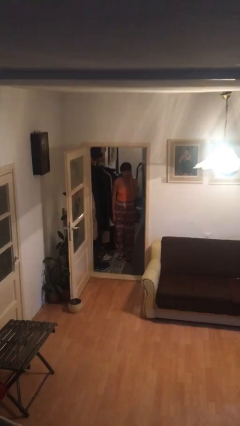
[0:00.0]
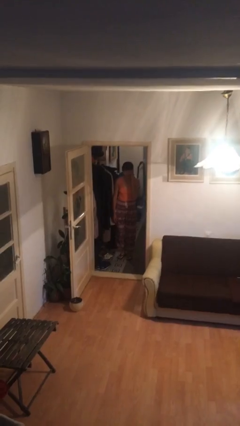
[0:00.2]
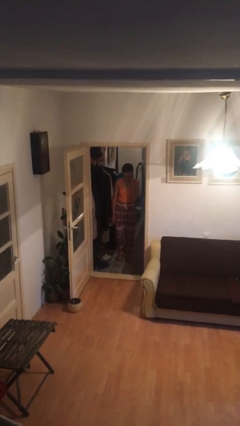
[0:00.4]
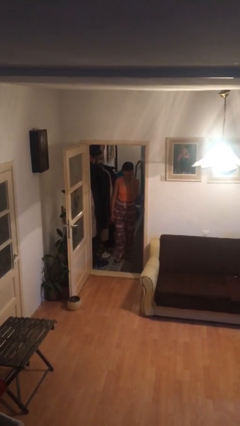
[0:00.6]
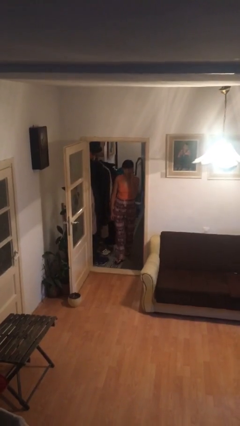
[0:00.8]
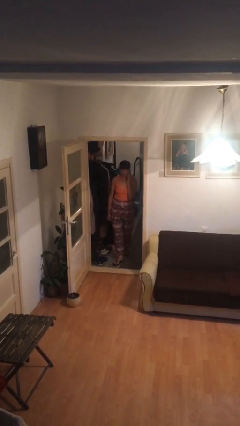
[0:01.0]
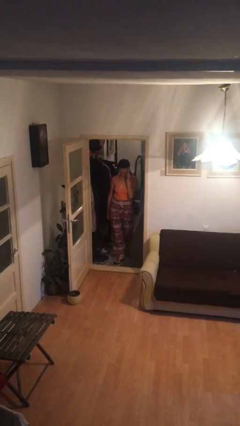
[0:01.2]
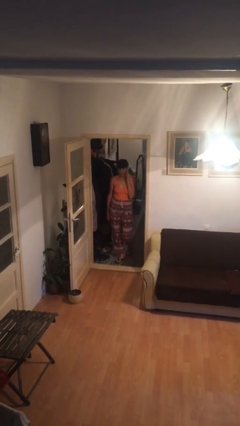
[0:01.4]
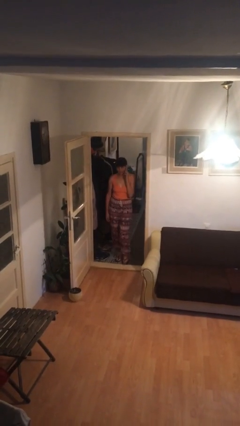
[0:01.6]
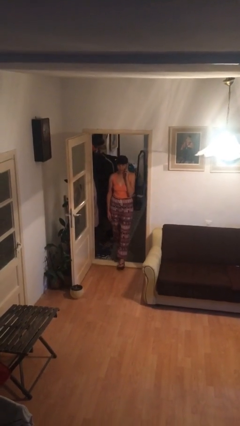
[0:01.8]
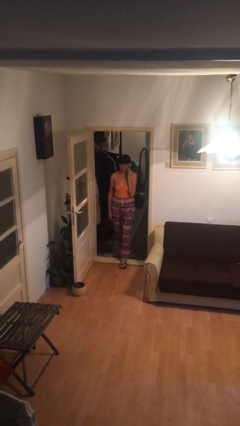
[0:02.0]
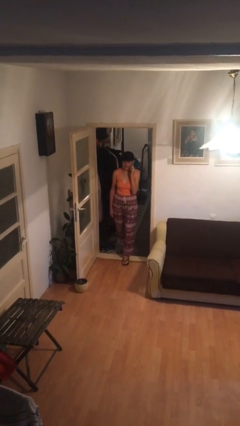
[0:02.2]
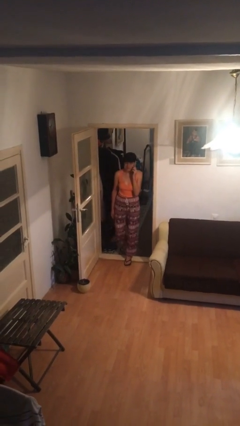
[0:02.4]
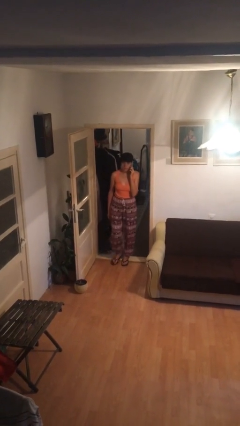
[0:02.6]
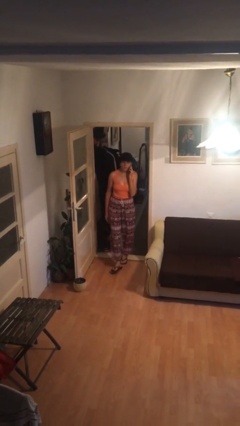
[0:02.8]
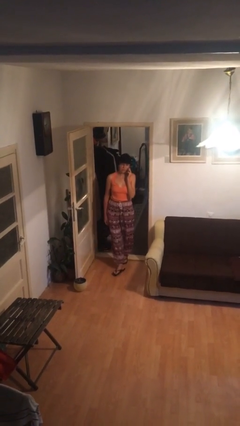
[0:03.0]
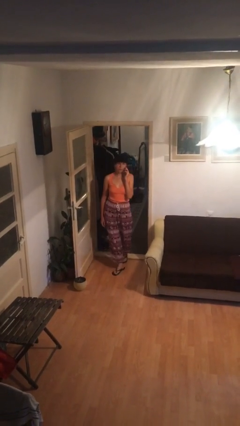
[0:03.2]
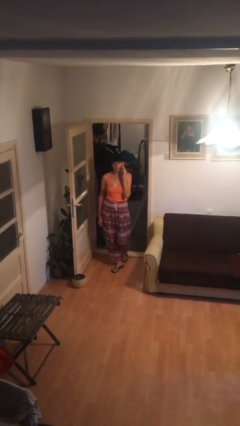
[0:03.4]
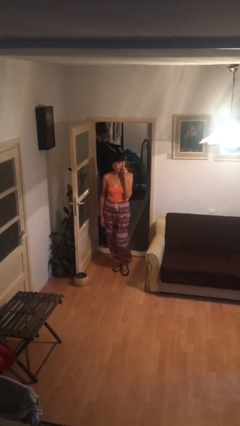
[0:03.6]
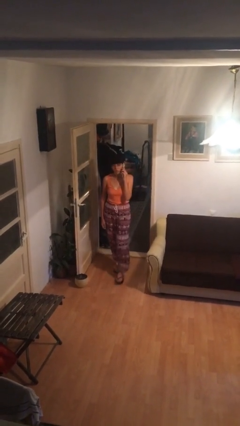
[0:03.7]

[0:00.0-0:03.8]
person enters scene through structure

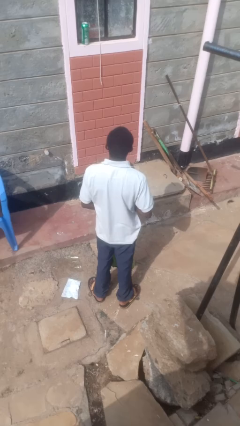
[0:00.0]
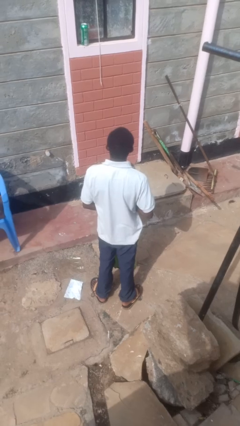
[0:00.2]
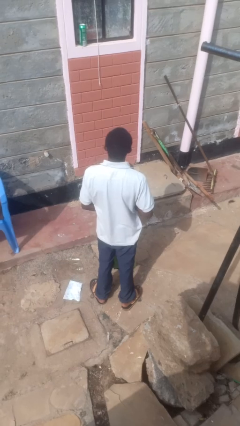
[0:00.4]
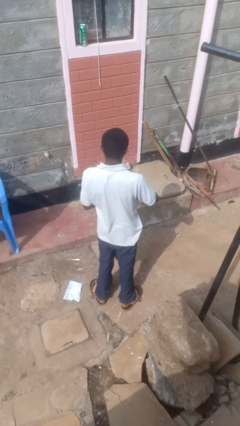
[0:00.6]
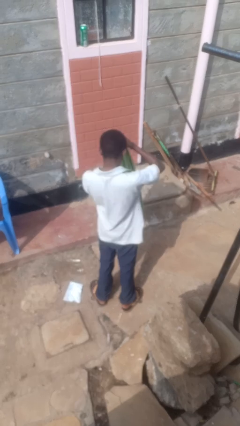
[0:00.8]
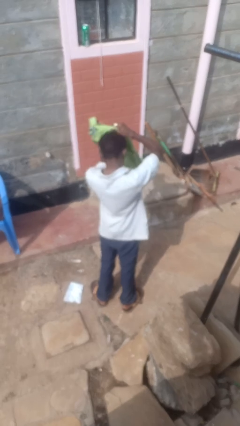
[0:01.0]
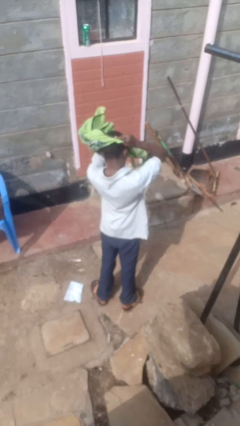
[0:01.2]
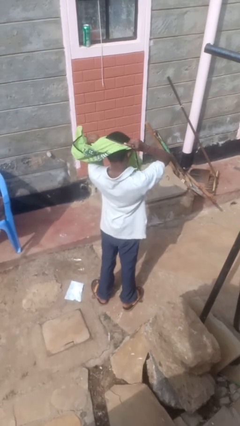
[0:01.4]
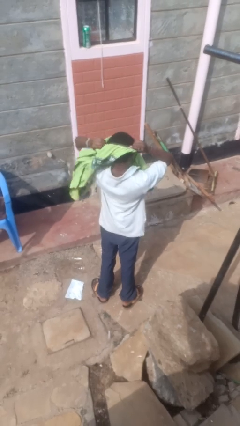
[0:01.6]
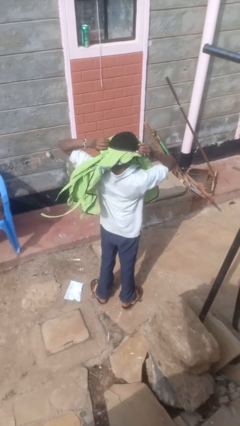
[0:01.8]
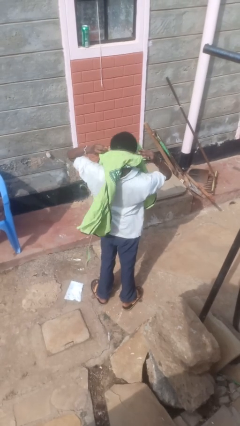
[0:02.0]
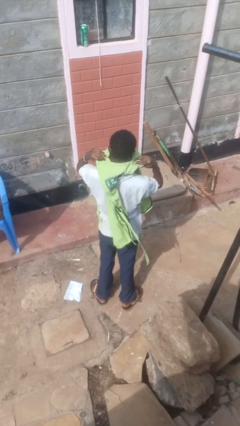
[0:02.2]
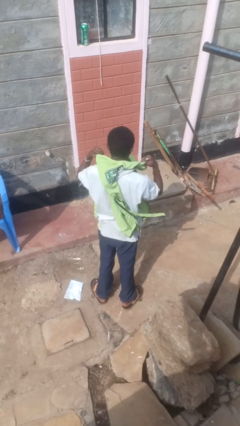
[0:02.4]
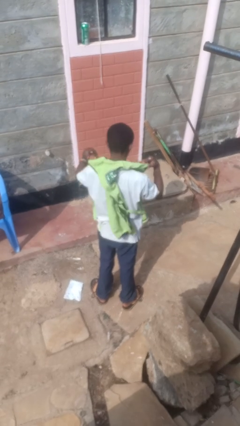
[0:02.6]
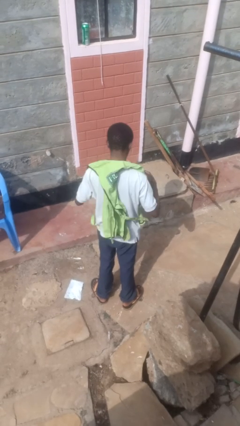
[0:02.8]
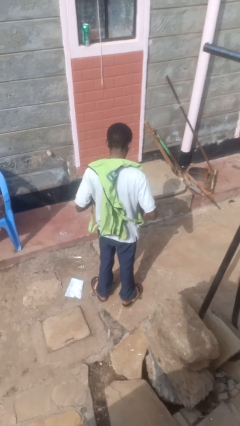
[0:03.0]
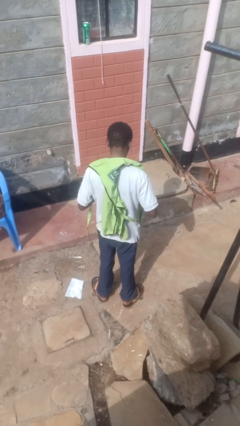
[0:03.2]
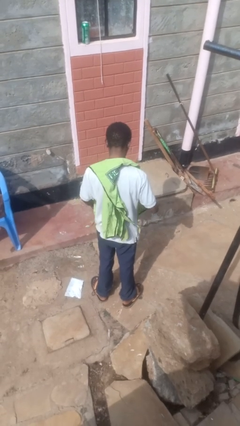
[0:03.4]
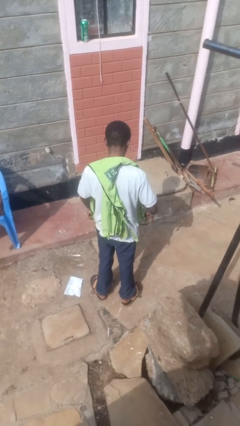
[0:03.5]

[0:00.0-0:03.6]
person puts on apron

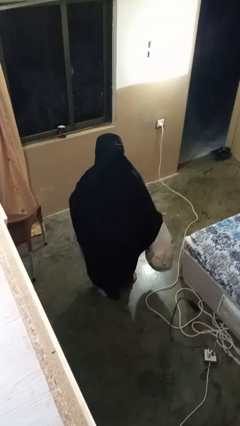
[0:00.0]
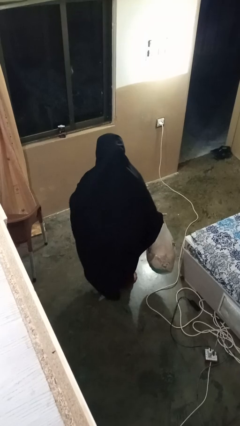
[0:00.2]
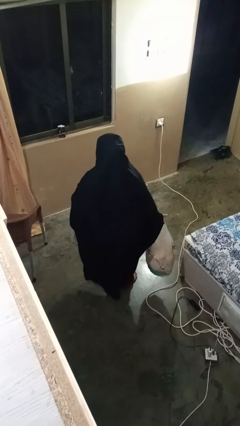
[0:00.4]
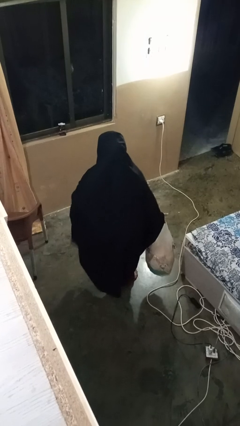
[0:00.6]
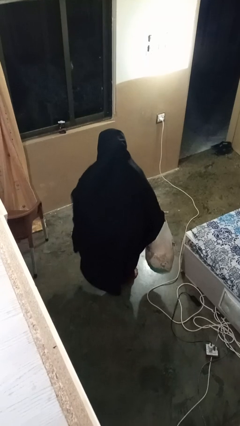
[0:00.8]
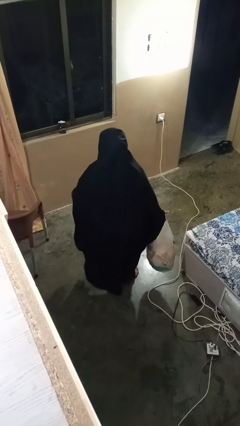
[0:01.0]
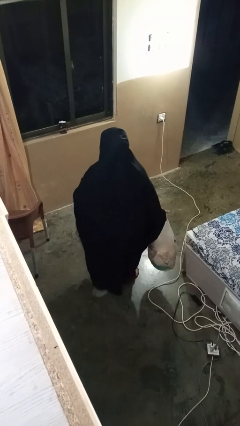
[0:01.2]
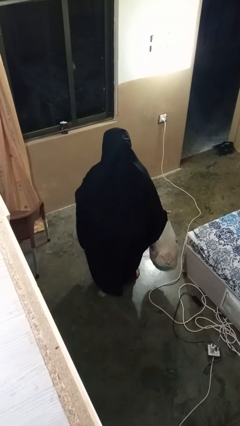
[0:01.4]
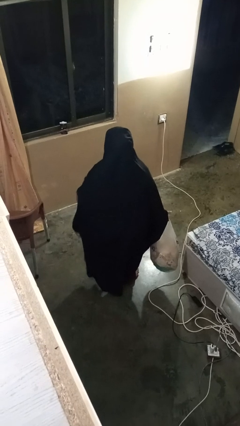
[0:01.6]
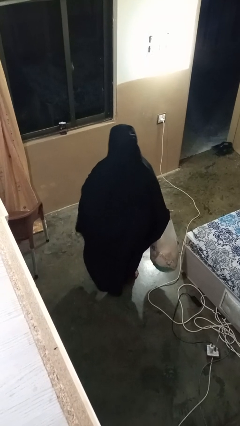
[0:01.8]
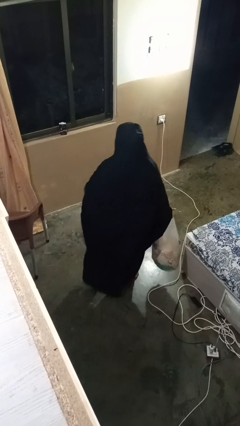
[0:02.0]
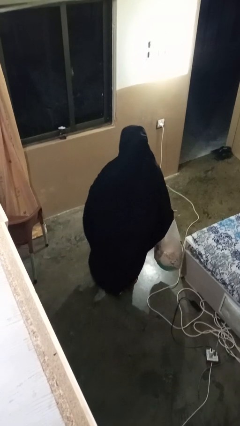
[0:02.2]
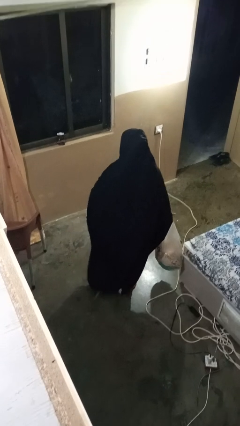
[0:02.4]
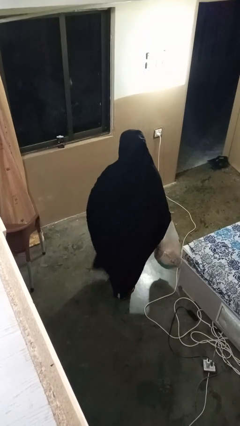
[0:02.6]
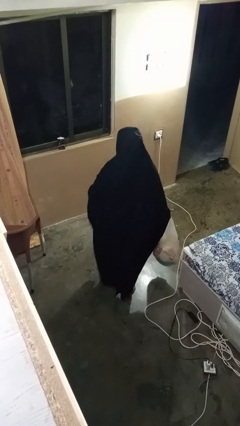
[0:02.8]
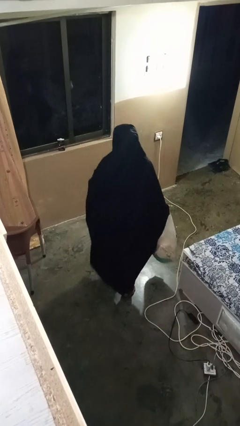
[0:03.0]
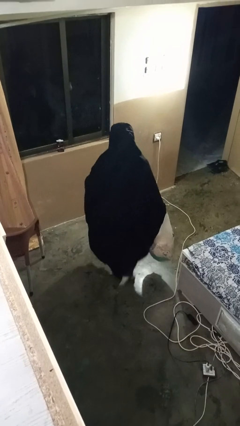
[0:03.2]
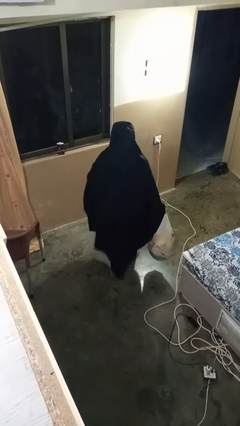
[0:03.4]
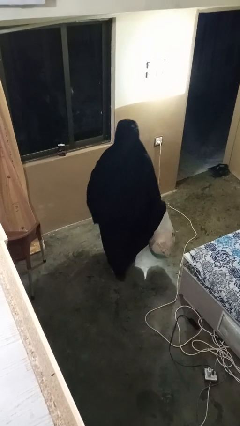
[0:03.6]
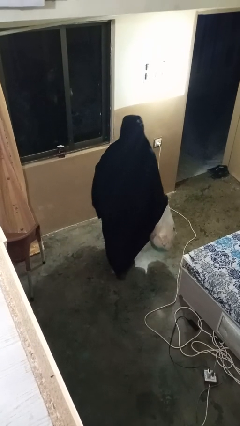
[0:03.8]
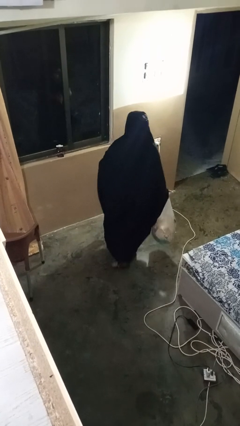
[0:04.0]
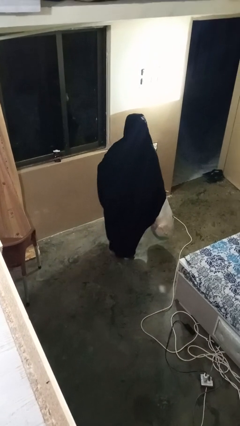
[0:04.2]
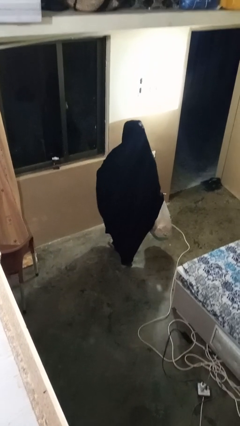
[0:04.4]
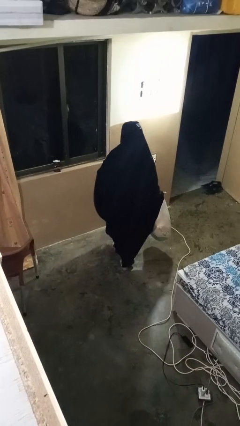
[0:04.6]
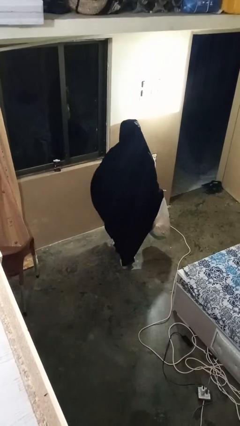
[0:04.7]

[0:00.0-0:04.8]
person carries groceries

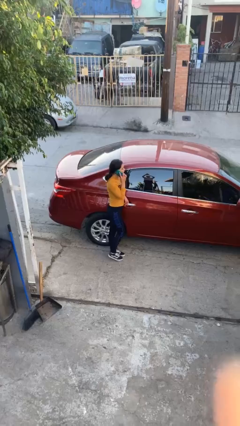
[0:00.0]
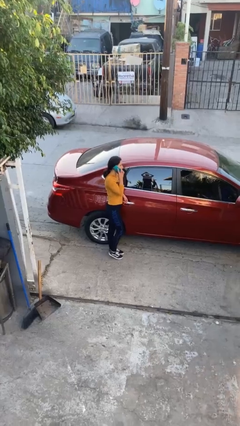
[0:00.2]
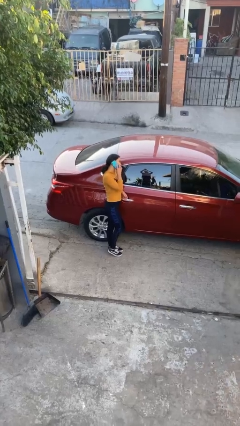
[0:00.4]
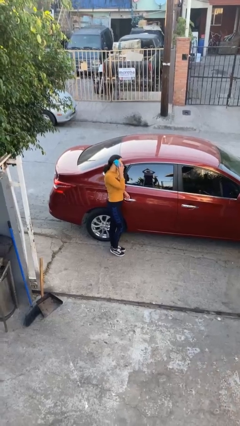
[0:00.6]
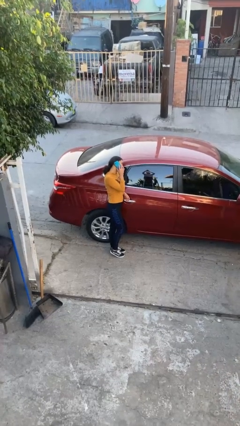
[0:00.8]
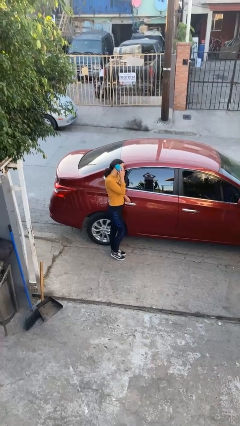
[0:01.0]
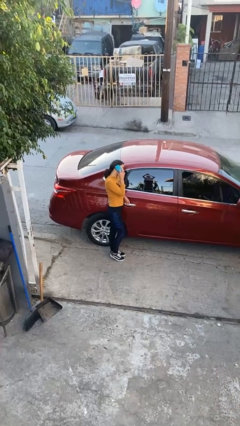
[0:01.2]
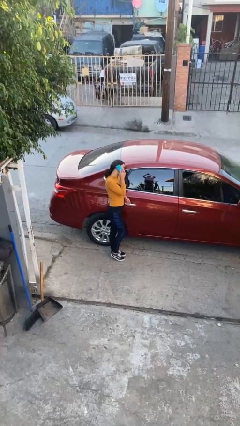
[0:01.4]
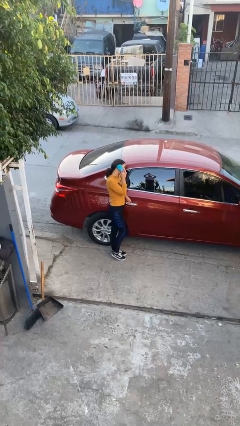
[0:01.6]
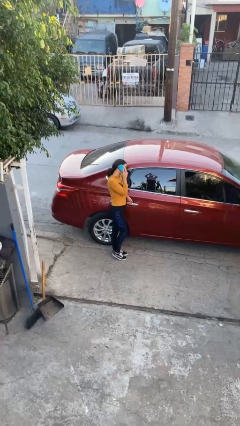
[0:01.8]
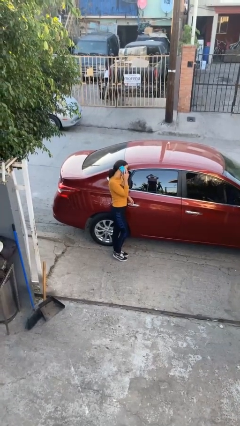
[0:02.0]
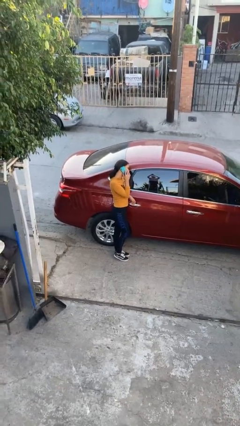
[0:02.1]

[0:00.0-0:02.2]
person leans against car

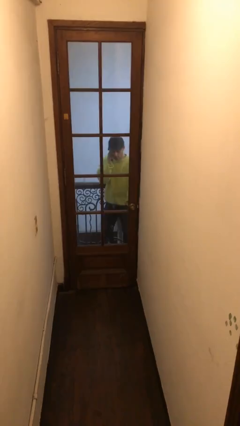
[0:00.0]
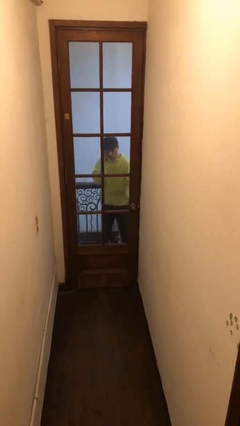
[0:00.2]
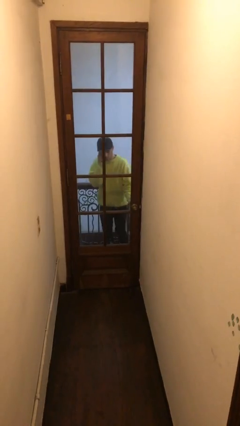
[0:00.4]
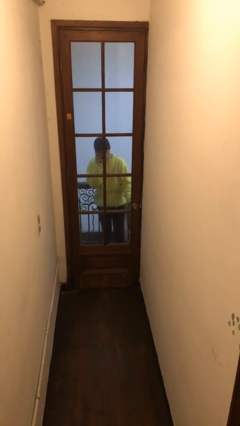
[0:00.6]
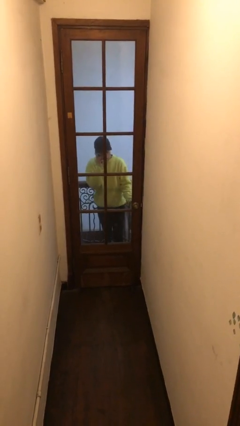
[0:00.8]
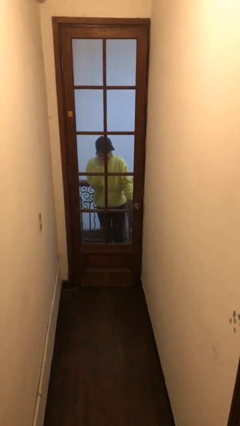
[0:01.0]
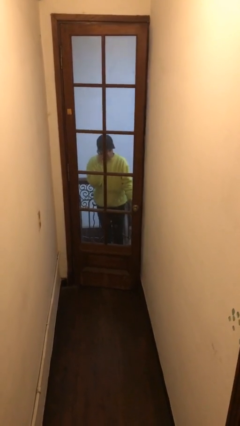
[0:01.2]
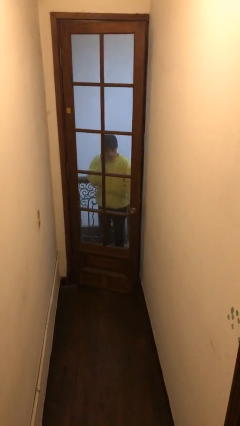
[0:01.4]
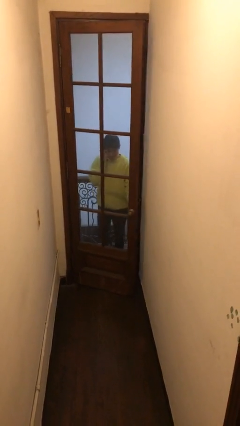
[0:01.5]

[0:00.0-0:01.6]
person opens facility door

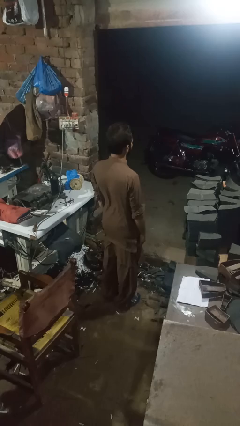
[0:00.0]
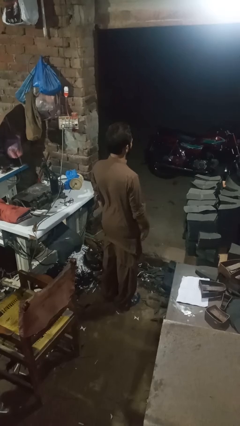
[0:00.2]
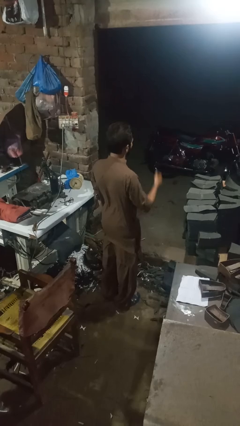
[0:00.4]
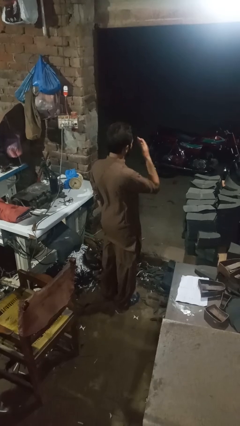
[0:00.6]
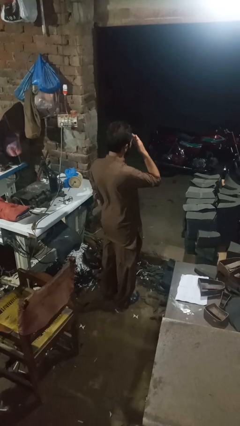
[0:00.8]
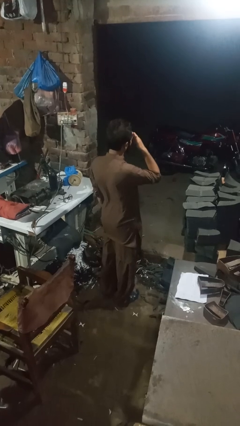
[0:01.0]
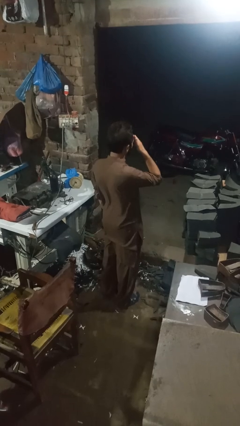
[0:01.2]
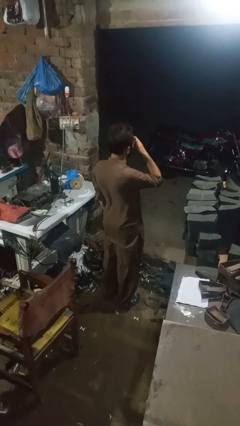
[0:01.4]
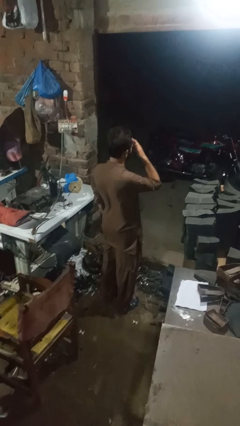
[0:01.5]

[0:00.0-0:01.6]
person rubs eyes
